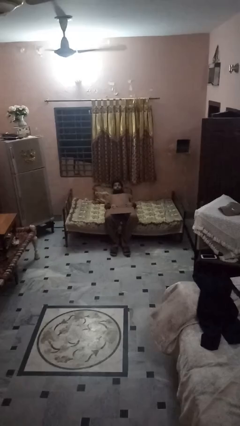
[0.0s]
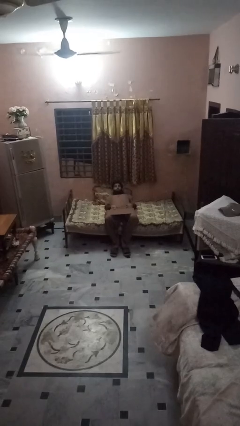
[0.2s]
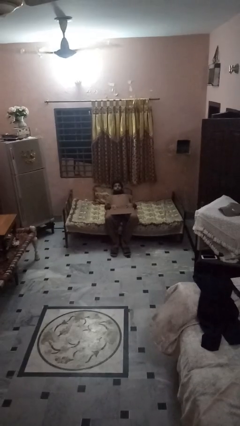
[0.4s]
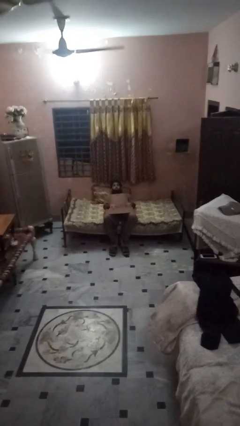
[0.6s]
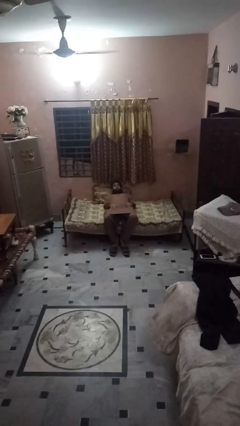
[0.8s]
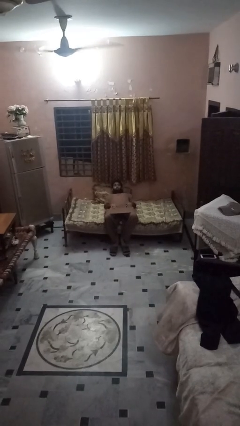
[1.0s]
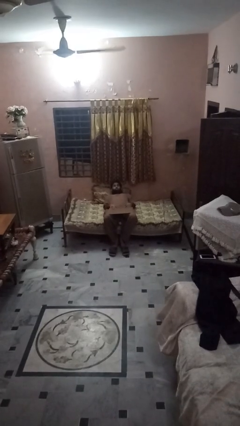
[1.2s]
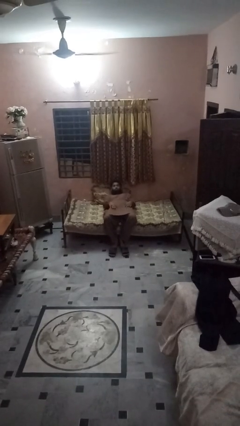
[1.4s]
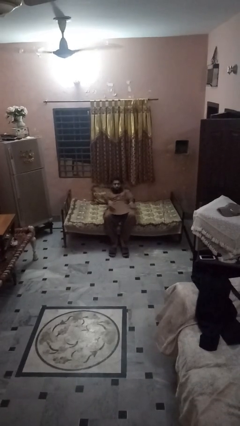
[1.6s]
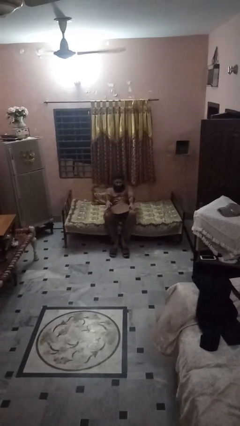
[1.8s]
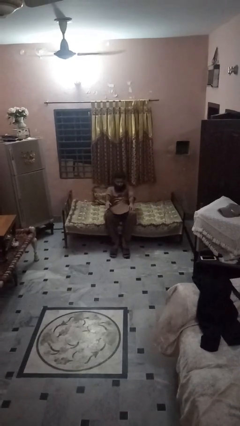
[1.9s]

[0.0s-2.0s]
person stands up

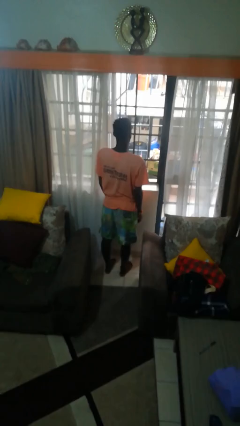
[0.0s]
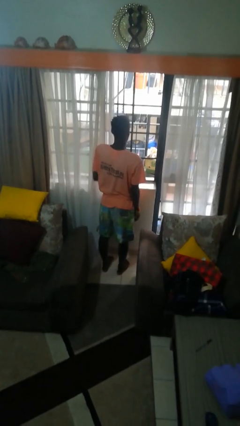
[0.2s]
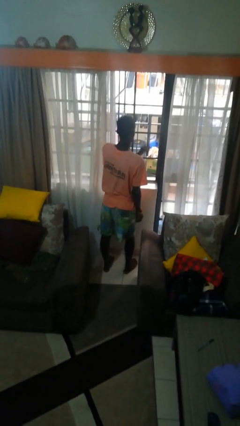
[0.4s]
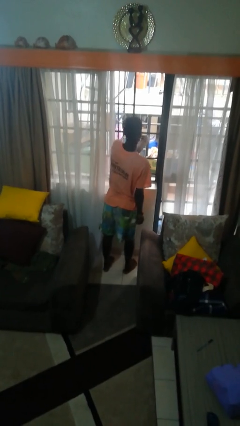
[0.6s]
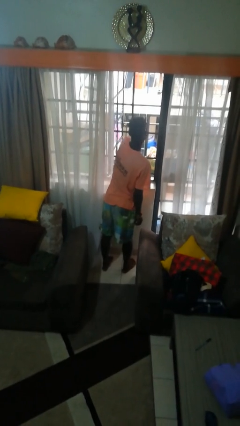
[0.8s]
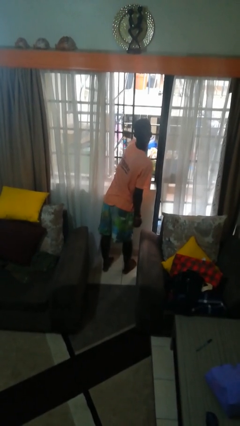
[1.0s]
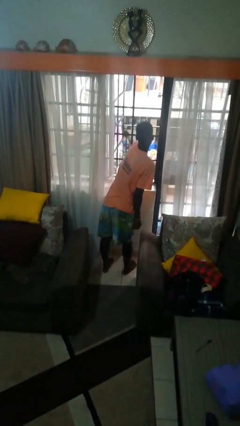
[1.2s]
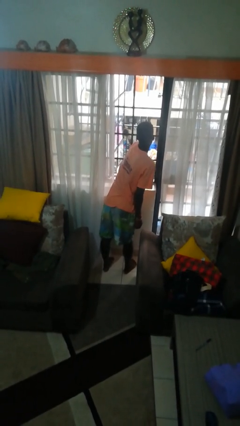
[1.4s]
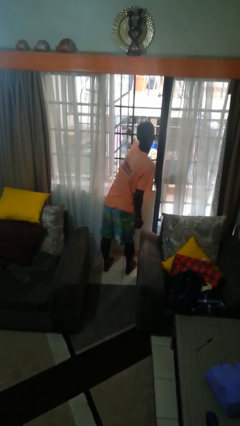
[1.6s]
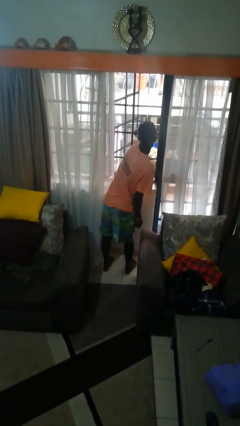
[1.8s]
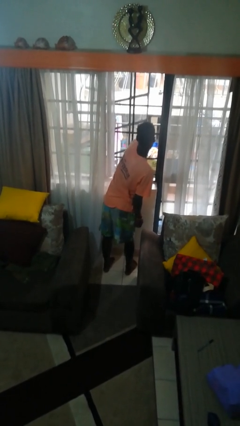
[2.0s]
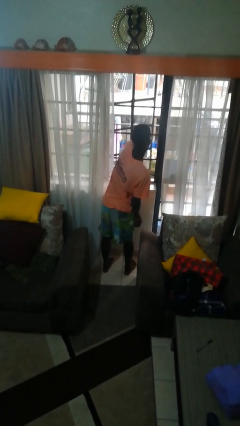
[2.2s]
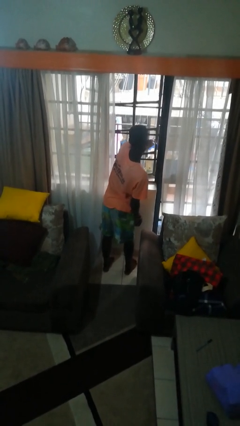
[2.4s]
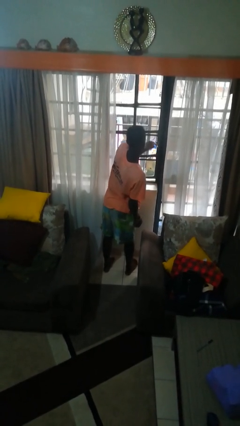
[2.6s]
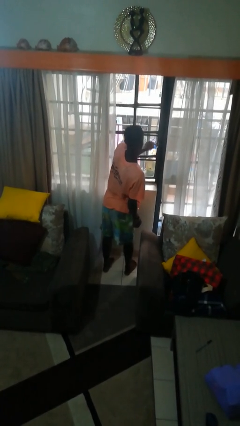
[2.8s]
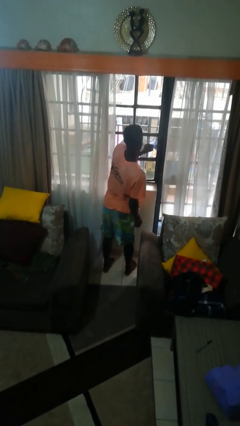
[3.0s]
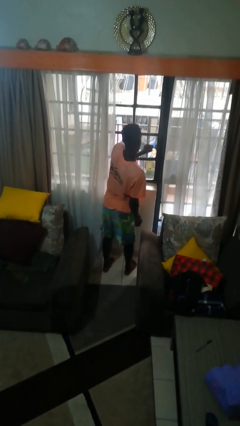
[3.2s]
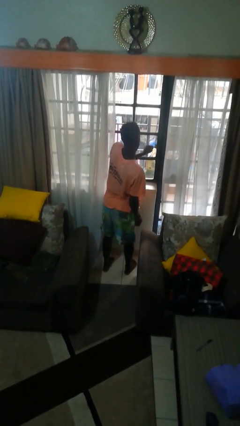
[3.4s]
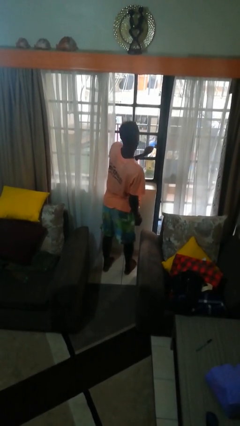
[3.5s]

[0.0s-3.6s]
person closes home window

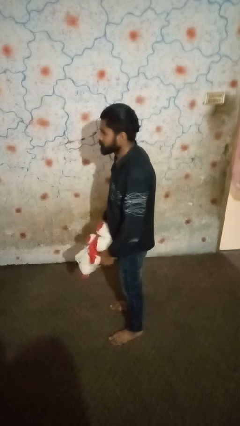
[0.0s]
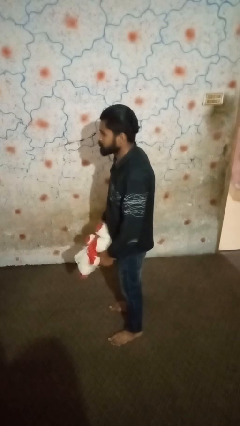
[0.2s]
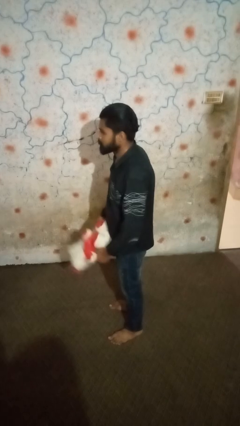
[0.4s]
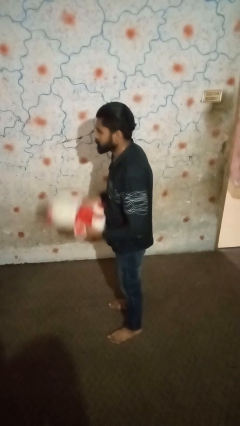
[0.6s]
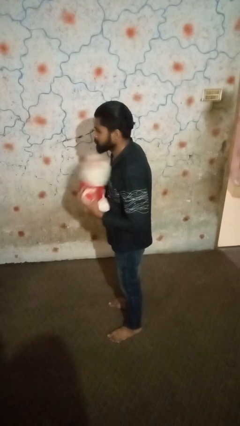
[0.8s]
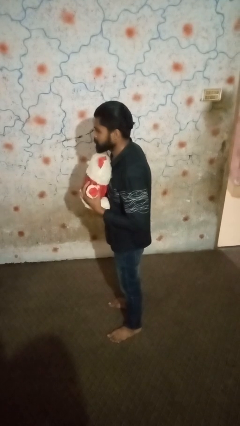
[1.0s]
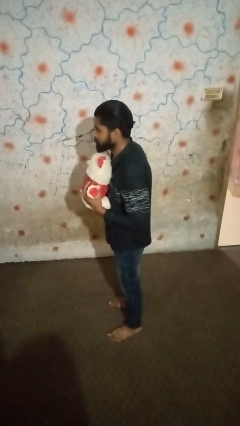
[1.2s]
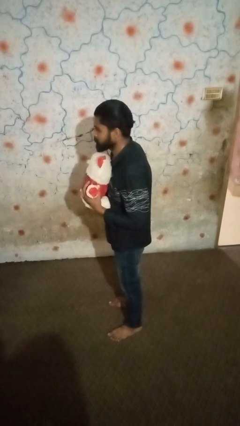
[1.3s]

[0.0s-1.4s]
person hugs stuffed animal

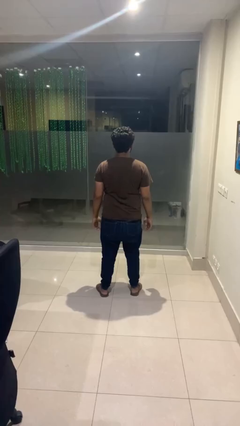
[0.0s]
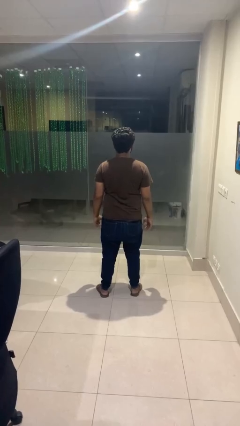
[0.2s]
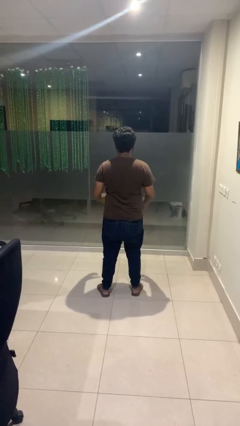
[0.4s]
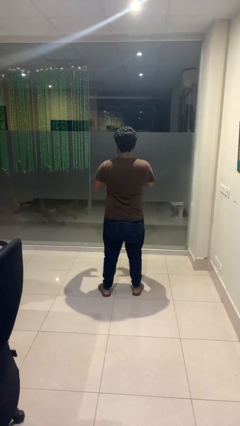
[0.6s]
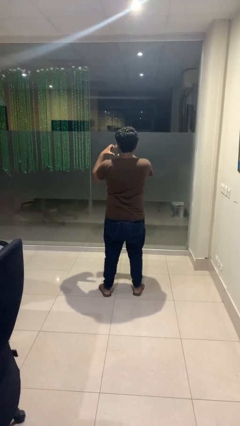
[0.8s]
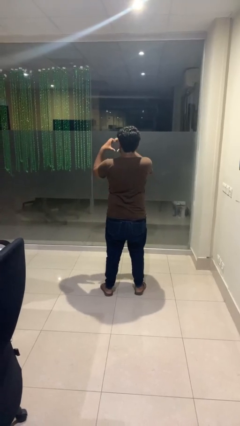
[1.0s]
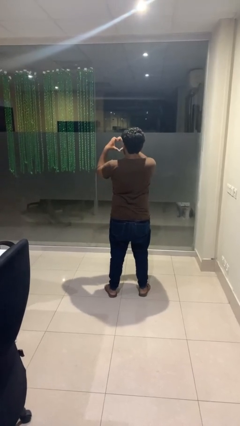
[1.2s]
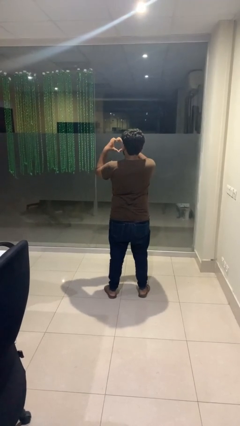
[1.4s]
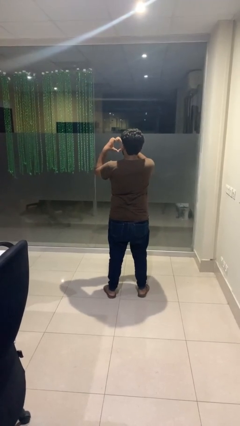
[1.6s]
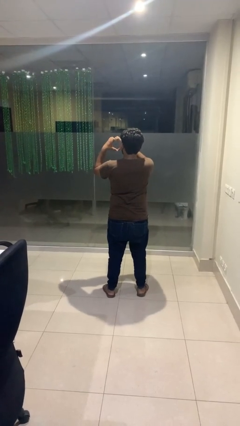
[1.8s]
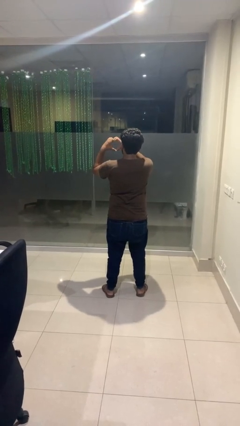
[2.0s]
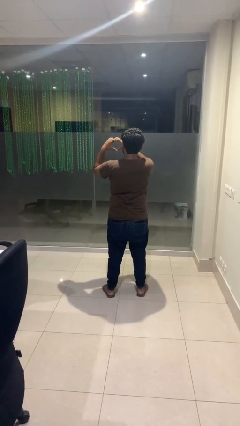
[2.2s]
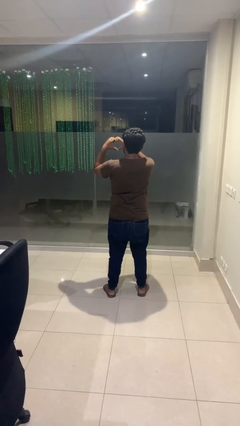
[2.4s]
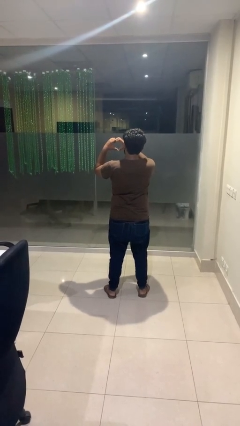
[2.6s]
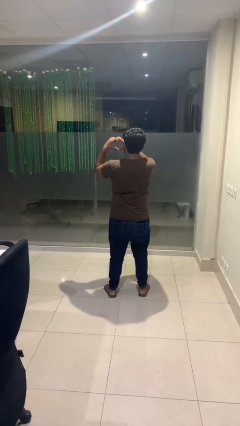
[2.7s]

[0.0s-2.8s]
person gestures heart

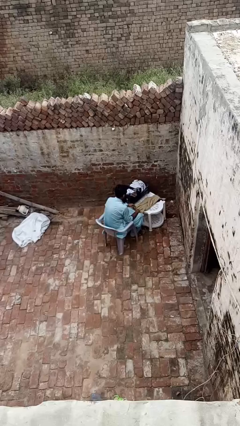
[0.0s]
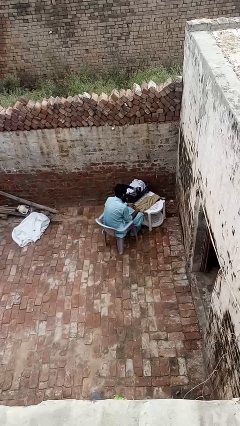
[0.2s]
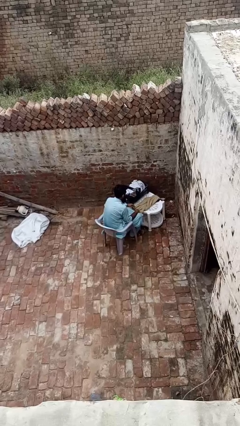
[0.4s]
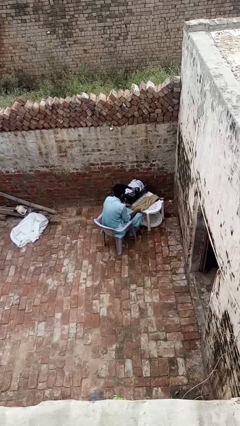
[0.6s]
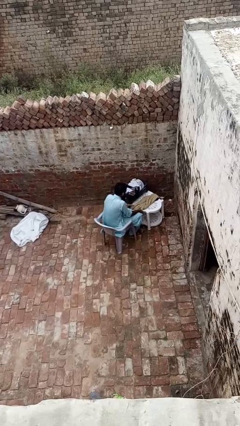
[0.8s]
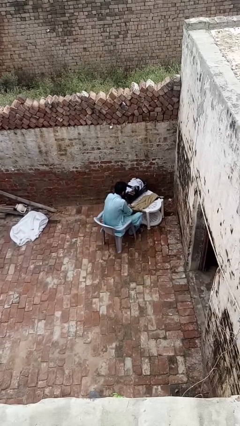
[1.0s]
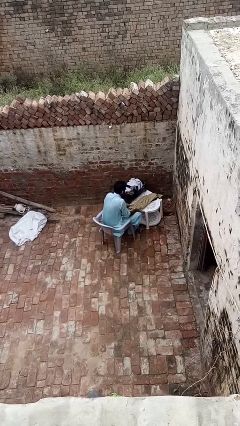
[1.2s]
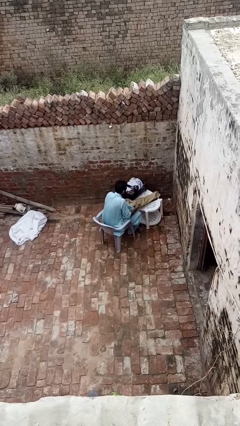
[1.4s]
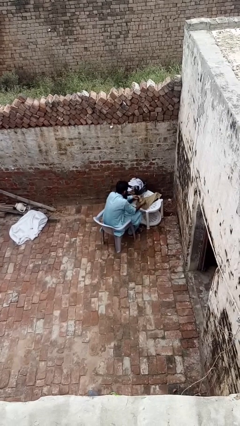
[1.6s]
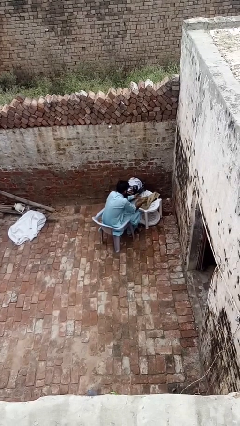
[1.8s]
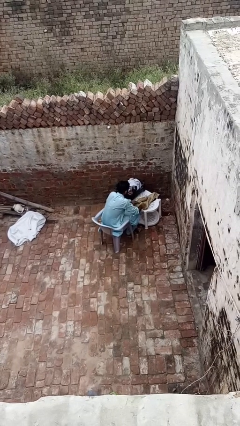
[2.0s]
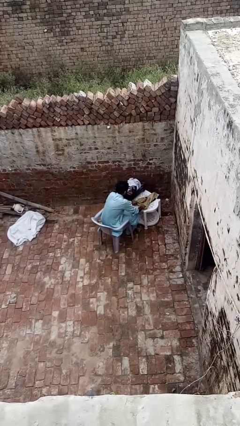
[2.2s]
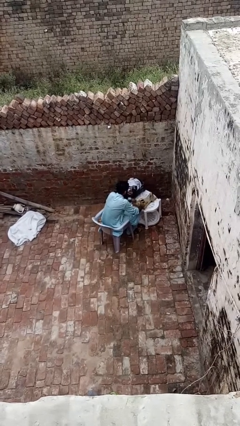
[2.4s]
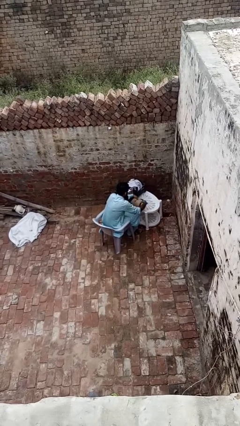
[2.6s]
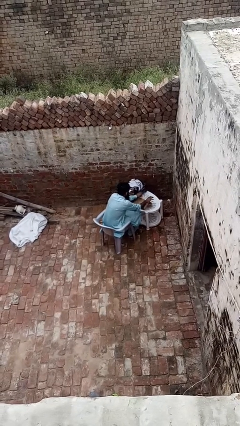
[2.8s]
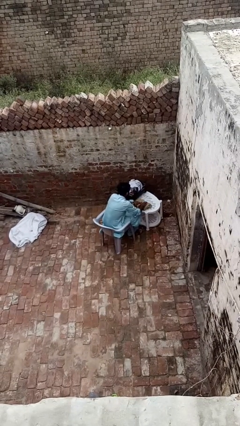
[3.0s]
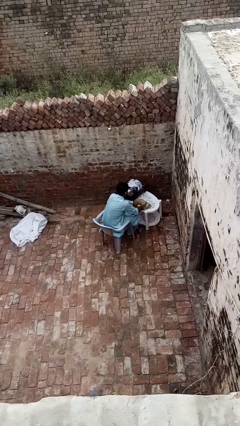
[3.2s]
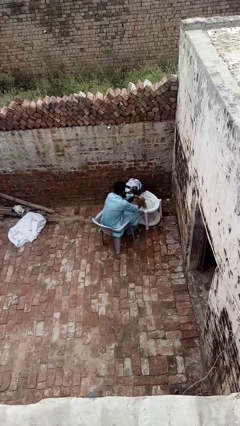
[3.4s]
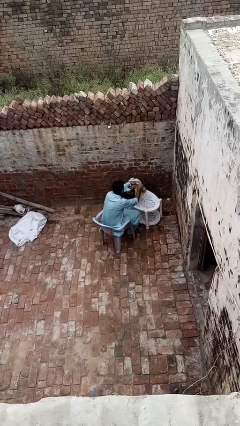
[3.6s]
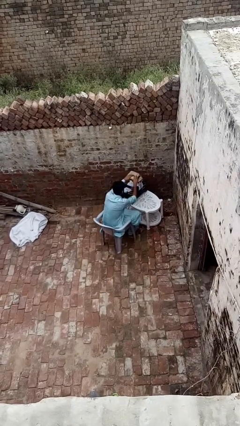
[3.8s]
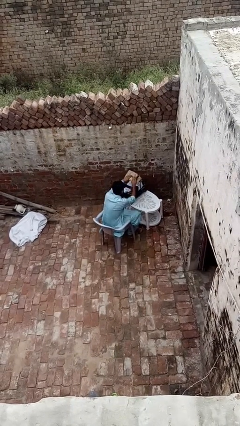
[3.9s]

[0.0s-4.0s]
person folds shirt

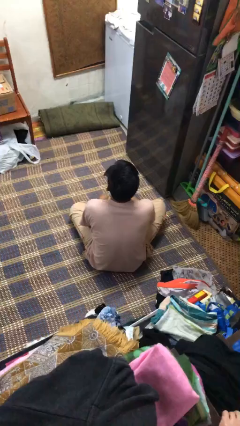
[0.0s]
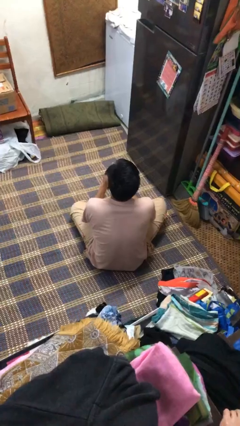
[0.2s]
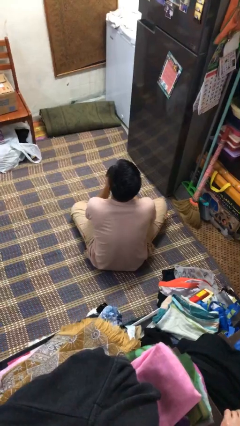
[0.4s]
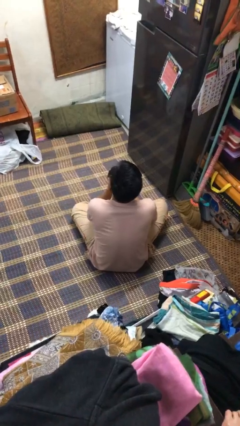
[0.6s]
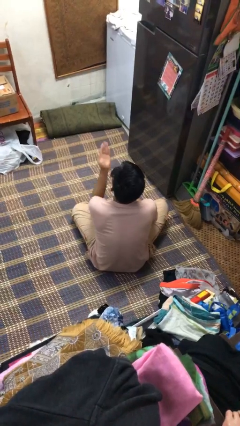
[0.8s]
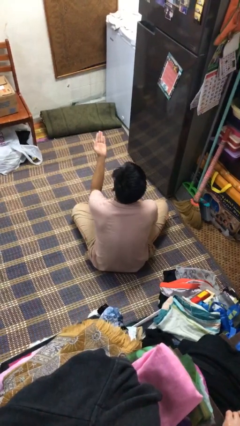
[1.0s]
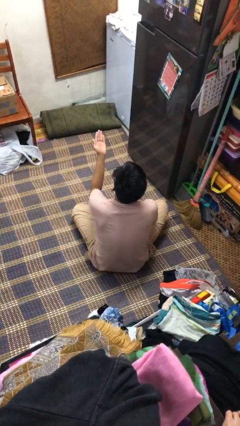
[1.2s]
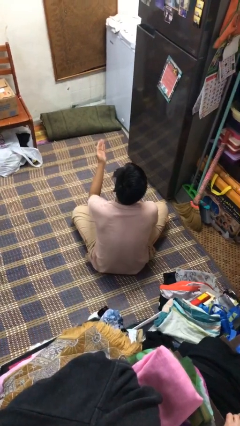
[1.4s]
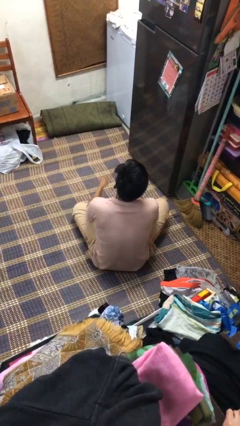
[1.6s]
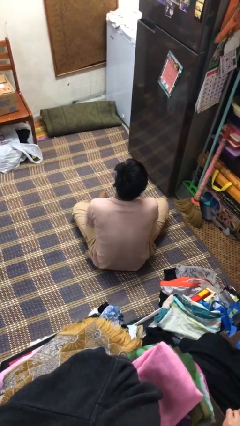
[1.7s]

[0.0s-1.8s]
person gestures blow kiss

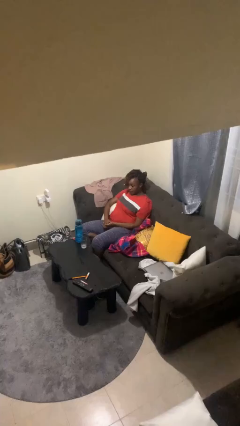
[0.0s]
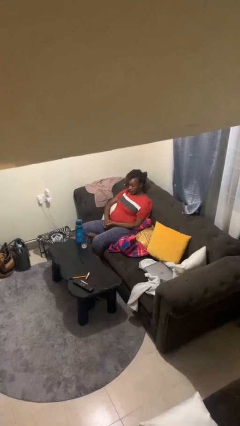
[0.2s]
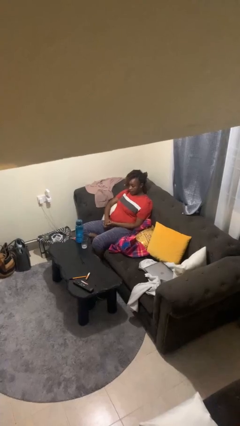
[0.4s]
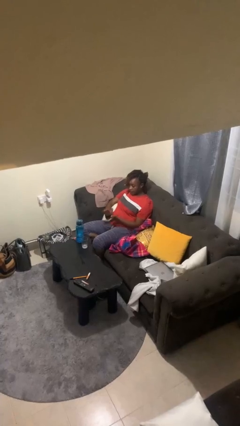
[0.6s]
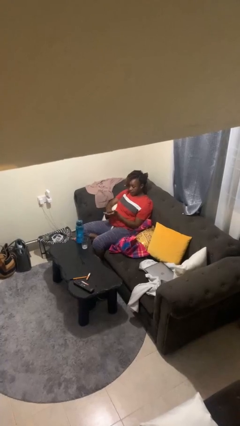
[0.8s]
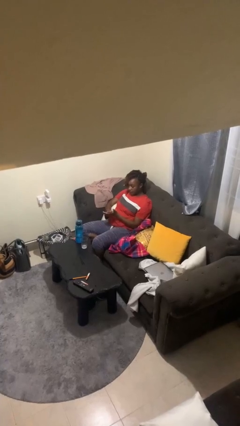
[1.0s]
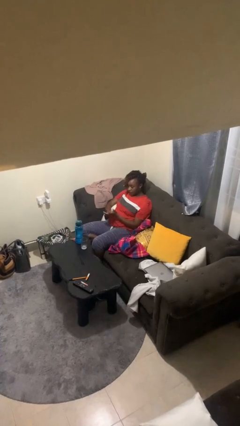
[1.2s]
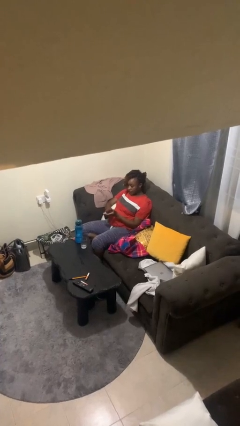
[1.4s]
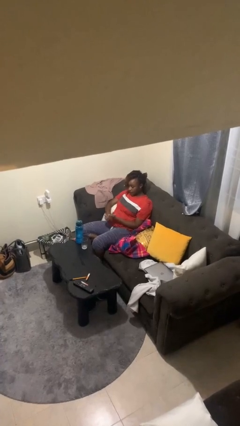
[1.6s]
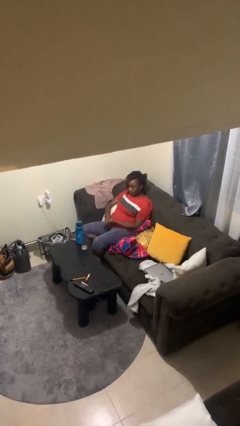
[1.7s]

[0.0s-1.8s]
person claps hands
